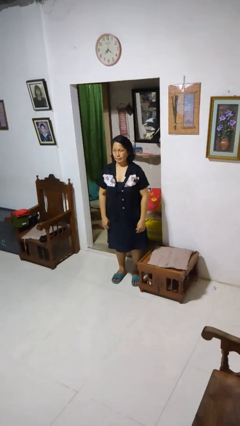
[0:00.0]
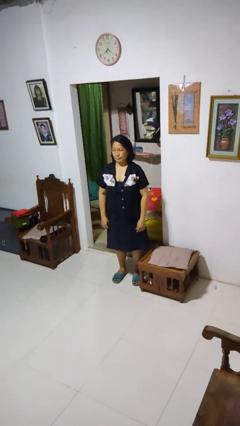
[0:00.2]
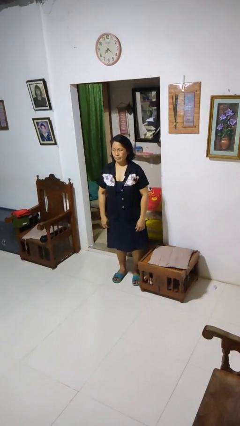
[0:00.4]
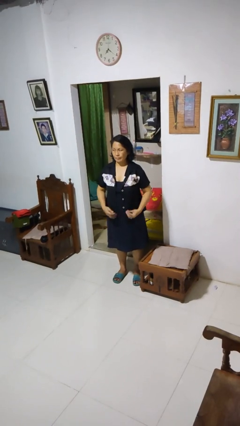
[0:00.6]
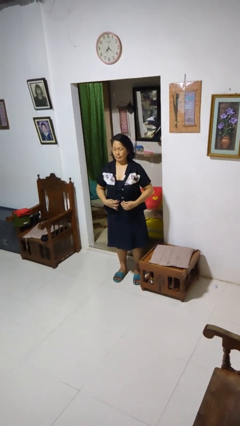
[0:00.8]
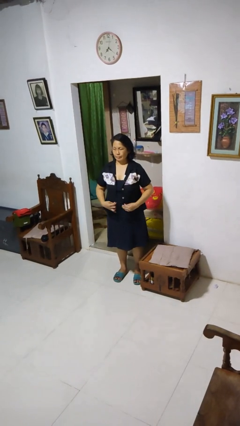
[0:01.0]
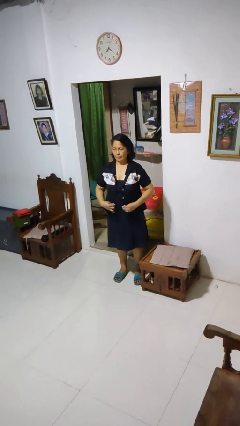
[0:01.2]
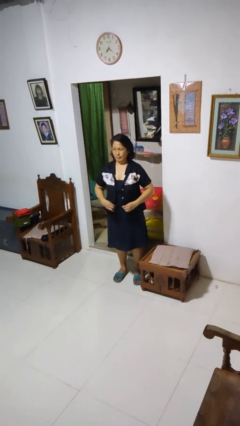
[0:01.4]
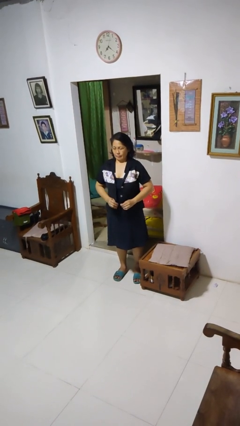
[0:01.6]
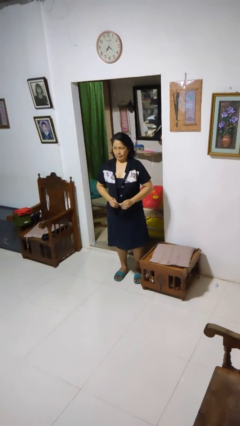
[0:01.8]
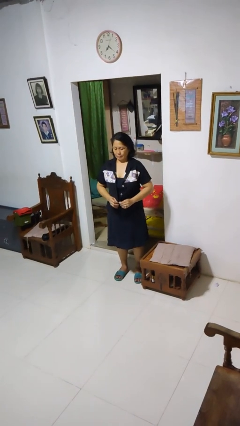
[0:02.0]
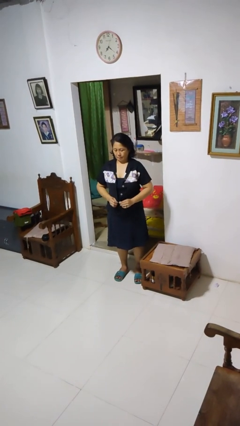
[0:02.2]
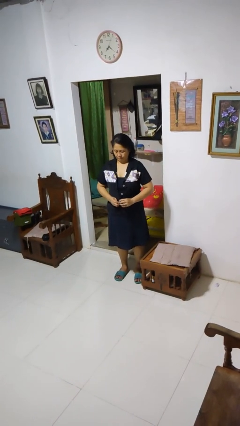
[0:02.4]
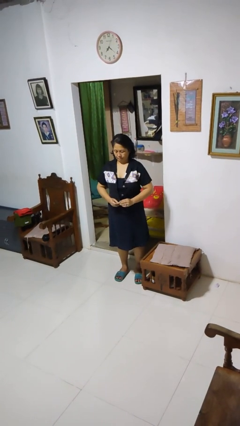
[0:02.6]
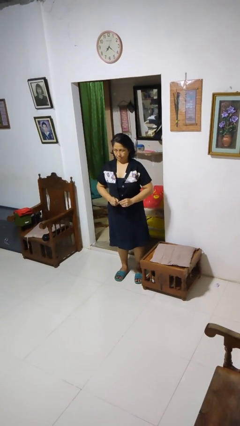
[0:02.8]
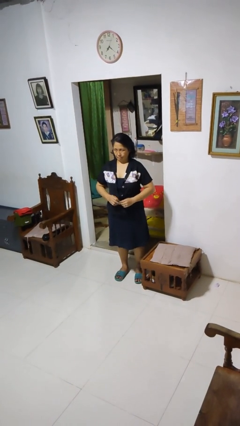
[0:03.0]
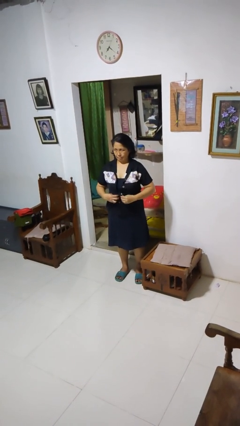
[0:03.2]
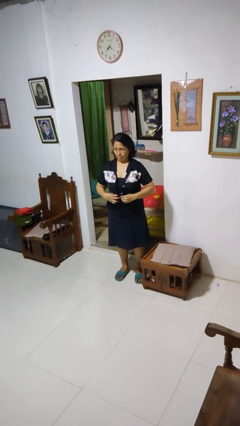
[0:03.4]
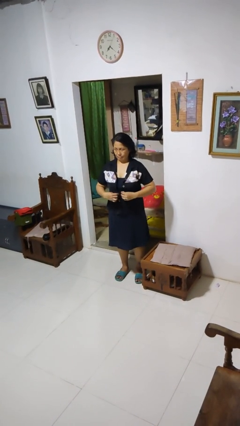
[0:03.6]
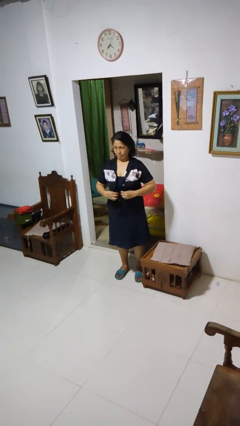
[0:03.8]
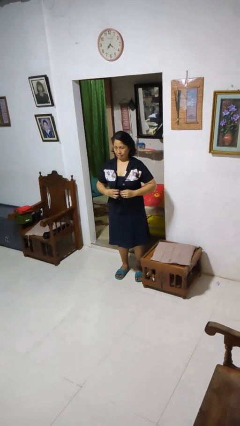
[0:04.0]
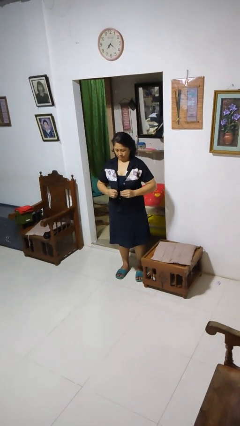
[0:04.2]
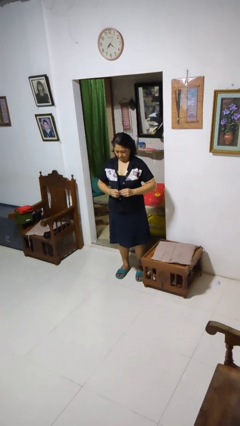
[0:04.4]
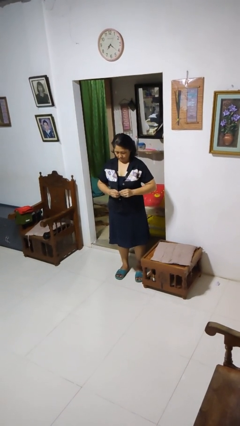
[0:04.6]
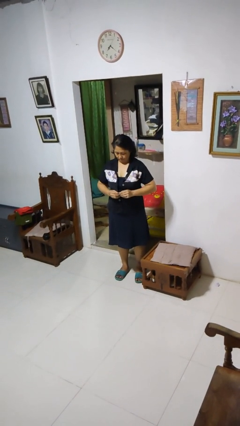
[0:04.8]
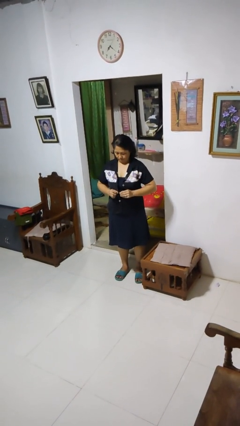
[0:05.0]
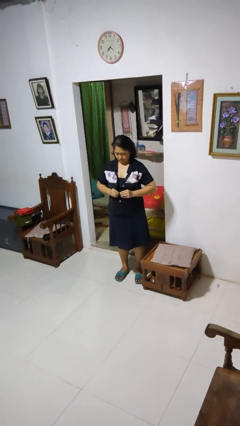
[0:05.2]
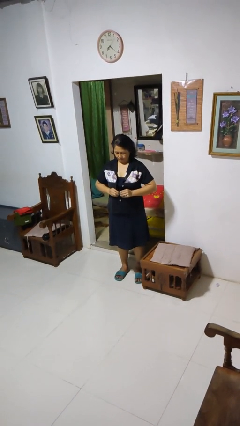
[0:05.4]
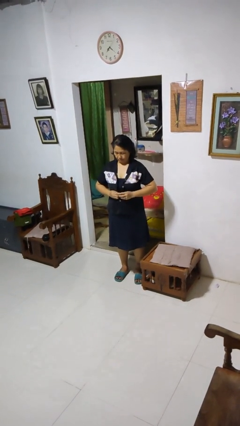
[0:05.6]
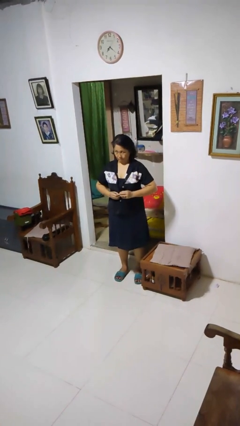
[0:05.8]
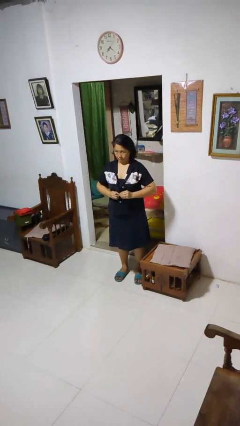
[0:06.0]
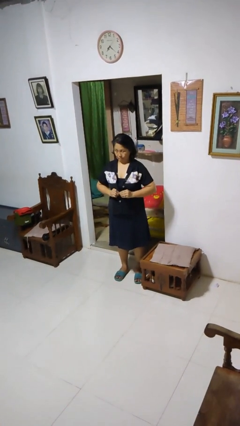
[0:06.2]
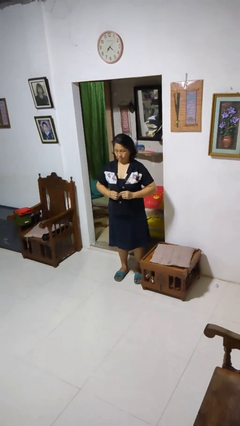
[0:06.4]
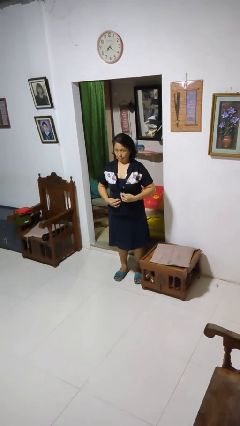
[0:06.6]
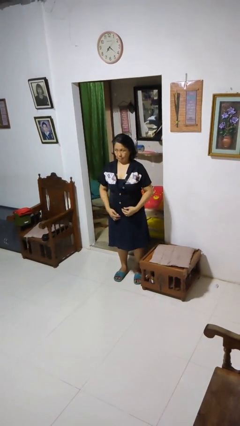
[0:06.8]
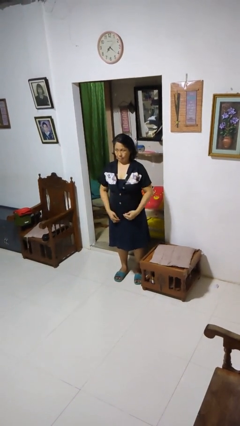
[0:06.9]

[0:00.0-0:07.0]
person buttons shirt

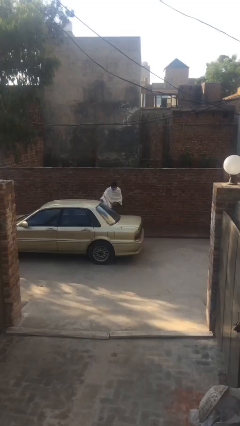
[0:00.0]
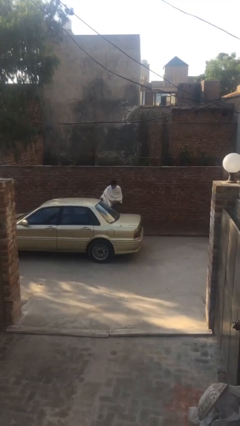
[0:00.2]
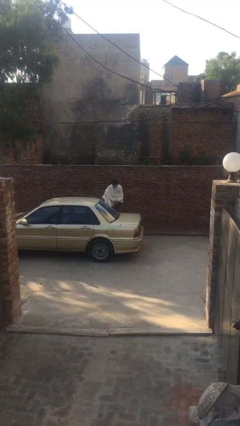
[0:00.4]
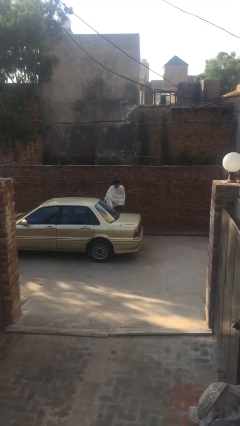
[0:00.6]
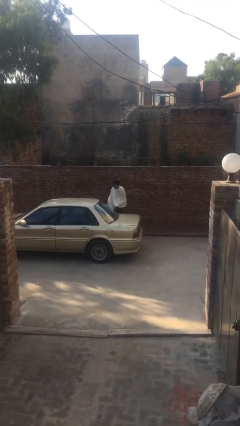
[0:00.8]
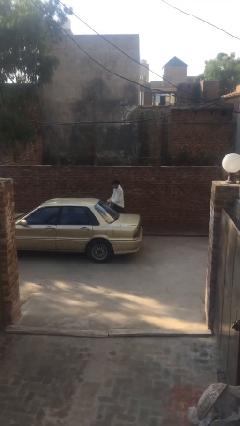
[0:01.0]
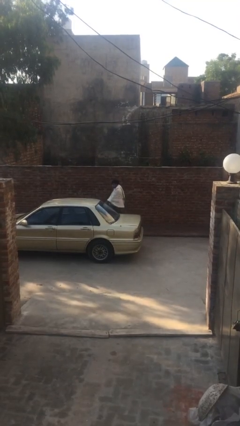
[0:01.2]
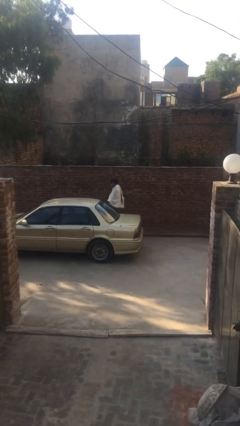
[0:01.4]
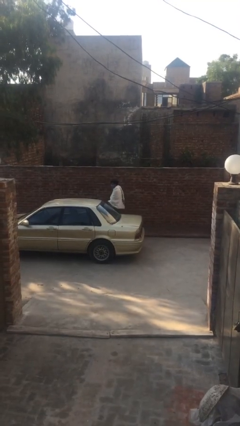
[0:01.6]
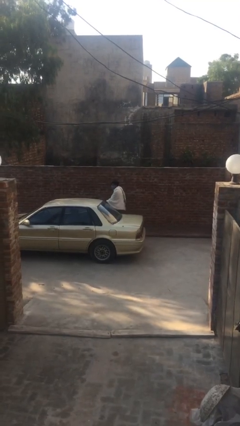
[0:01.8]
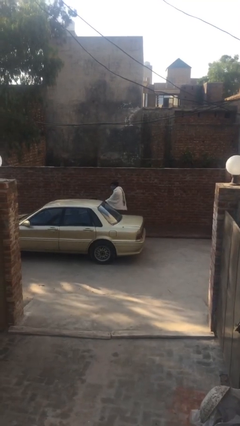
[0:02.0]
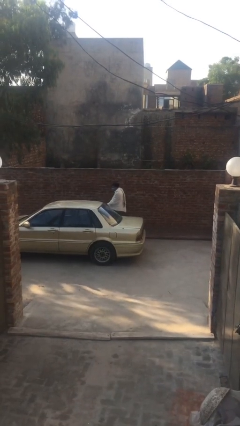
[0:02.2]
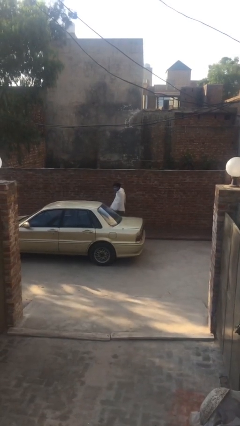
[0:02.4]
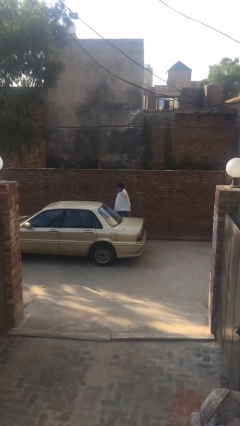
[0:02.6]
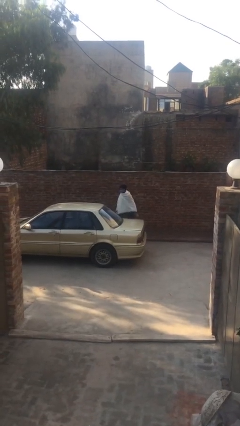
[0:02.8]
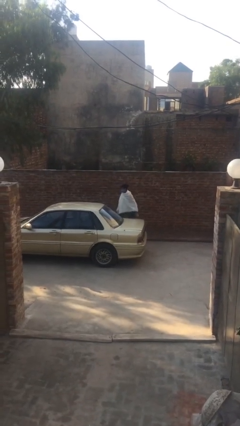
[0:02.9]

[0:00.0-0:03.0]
person opens car door

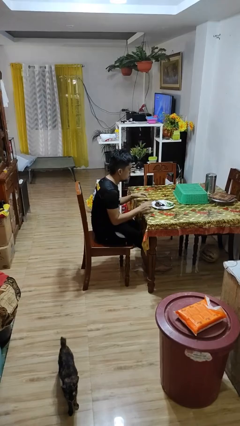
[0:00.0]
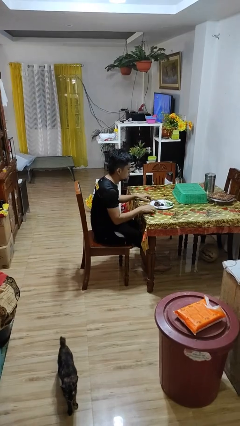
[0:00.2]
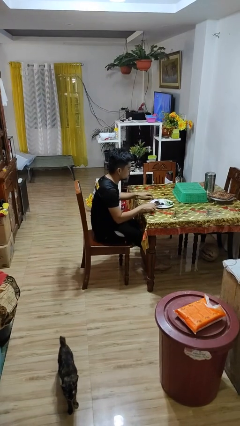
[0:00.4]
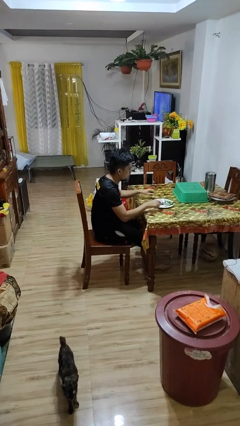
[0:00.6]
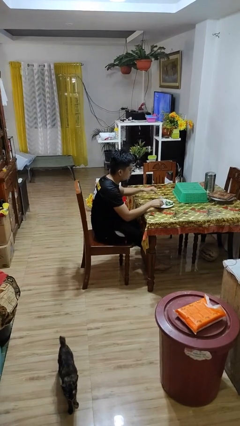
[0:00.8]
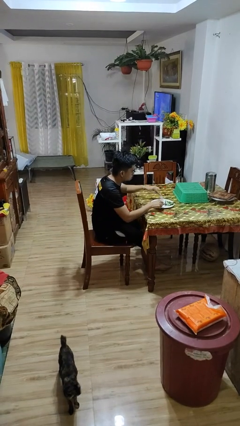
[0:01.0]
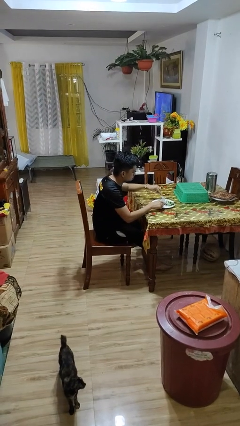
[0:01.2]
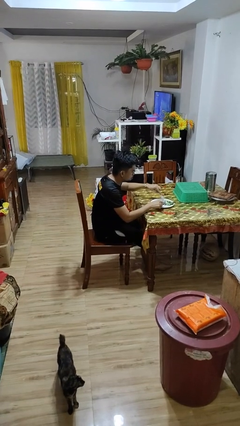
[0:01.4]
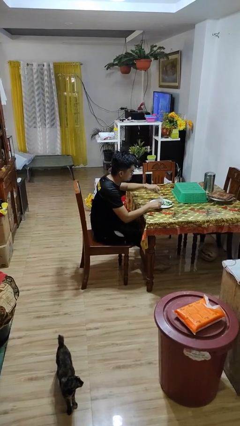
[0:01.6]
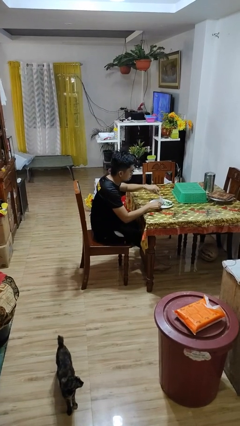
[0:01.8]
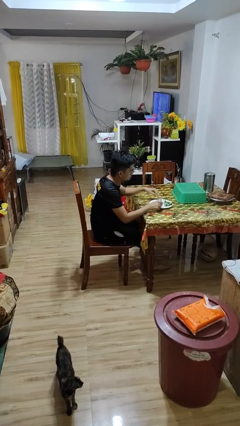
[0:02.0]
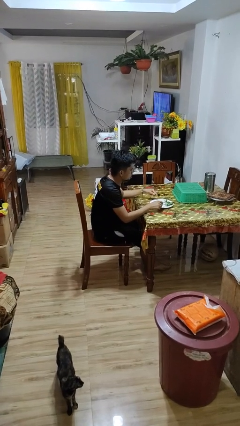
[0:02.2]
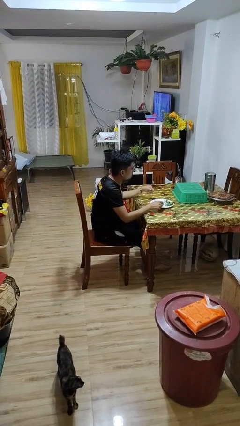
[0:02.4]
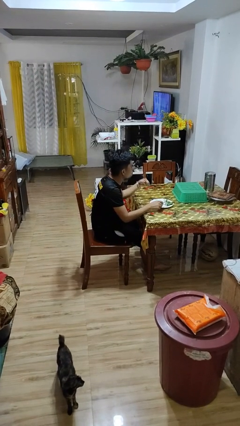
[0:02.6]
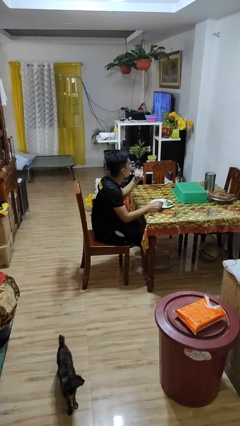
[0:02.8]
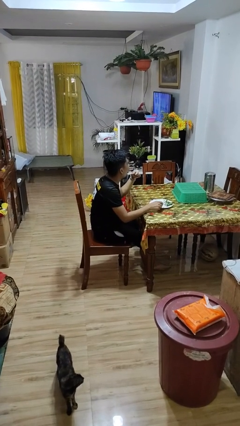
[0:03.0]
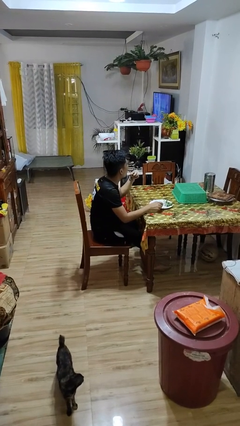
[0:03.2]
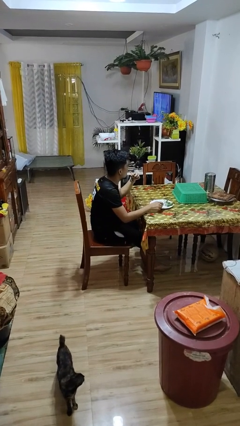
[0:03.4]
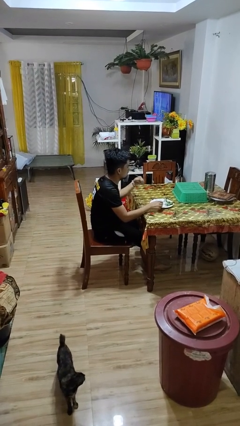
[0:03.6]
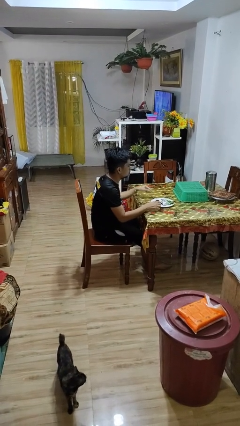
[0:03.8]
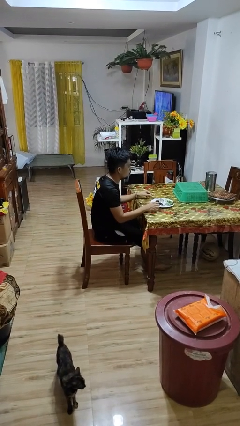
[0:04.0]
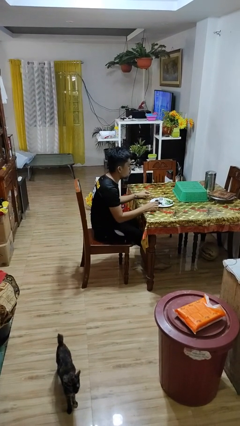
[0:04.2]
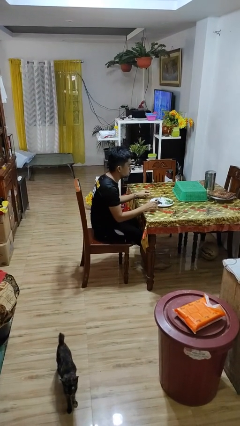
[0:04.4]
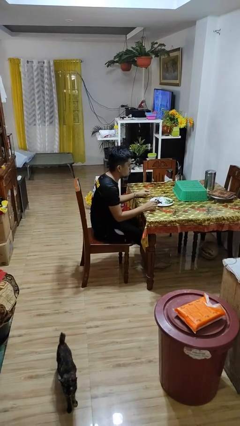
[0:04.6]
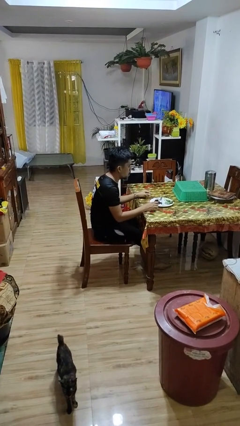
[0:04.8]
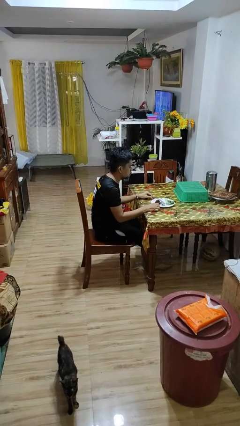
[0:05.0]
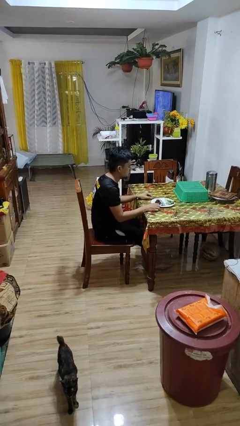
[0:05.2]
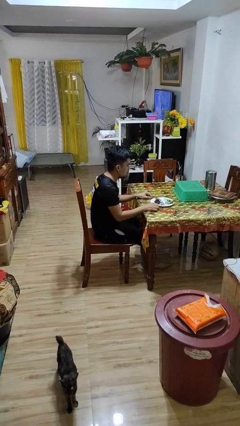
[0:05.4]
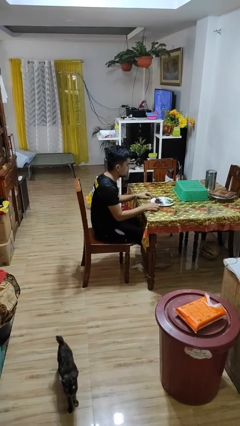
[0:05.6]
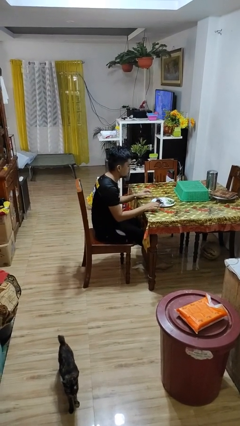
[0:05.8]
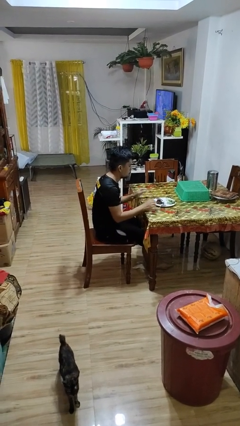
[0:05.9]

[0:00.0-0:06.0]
person eats with utensil

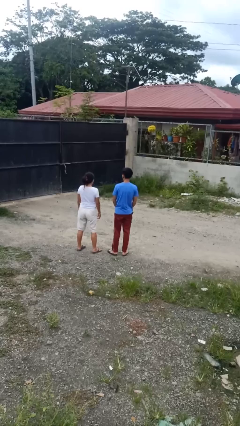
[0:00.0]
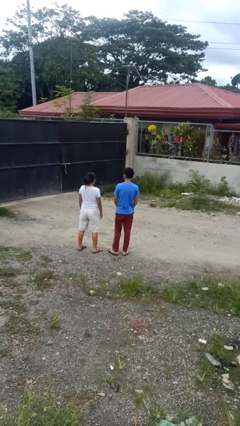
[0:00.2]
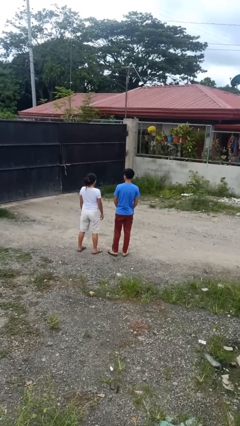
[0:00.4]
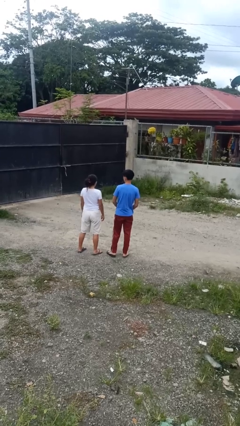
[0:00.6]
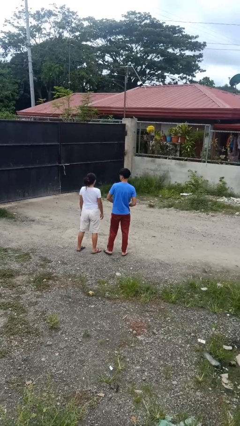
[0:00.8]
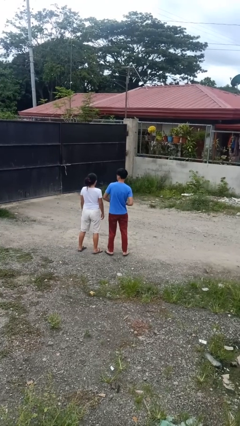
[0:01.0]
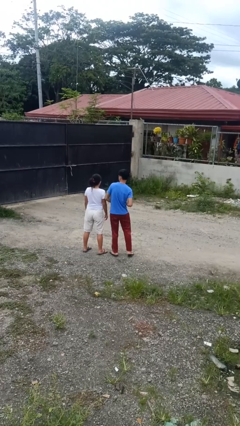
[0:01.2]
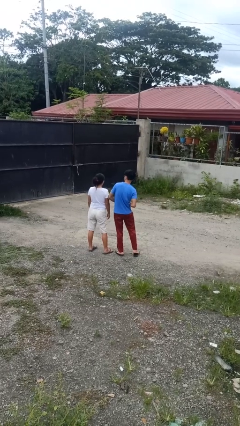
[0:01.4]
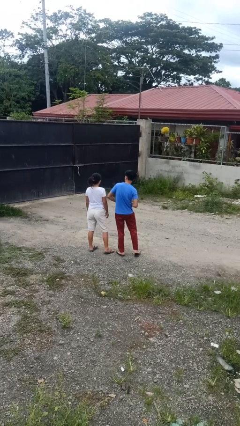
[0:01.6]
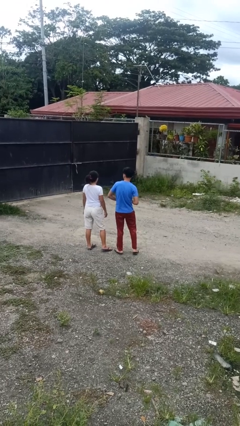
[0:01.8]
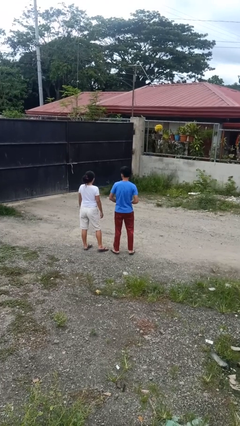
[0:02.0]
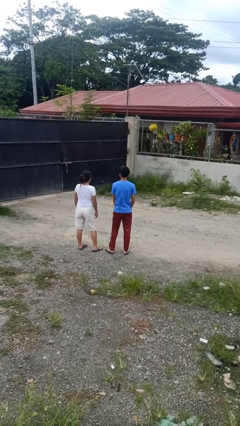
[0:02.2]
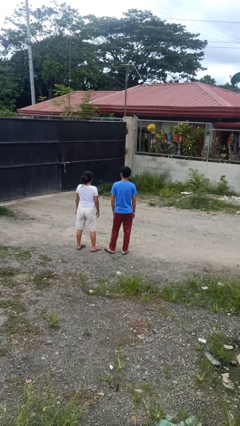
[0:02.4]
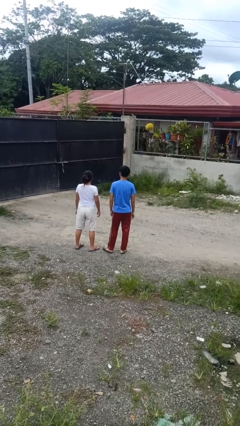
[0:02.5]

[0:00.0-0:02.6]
person nudges person with elbow
